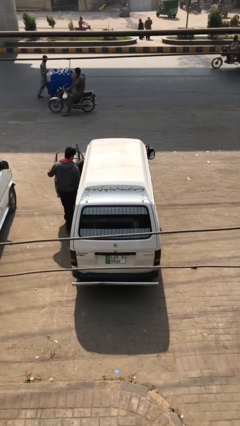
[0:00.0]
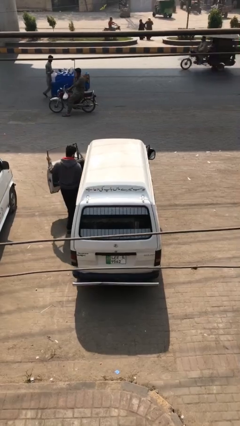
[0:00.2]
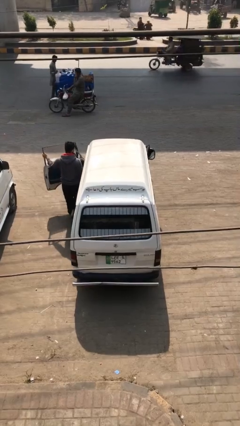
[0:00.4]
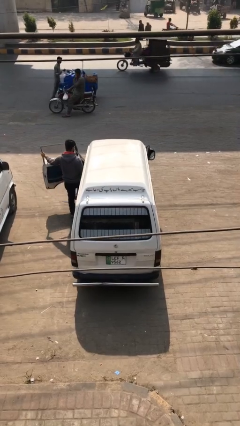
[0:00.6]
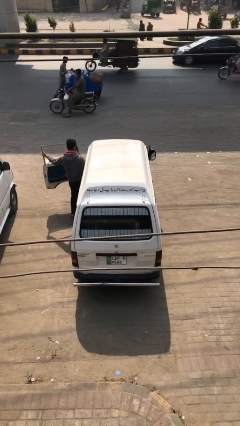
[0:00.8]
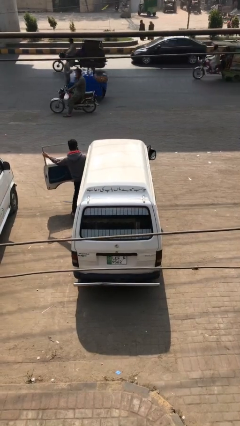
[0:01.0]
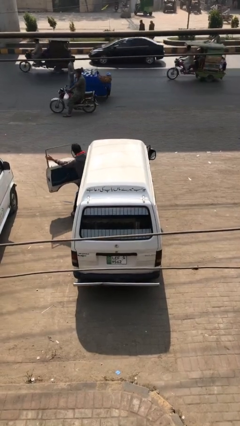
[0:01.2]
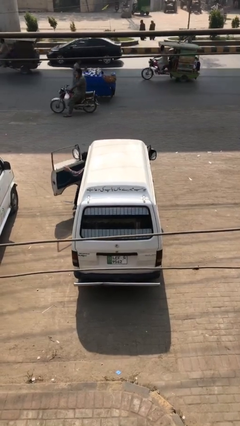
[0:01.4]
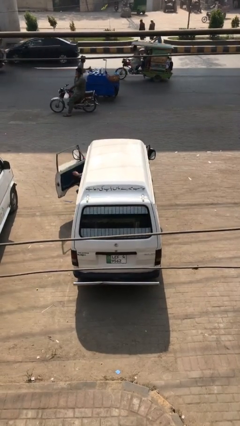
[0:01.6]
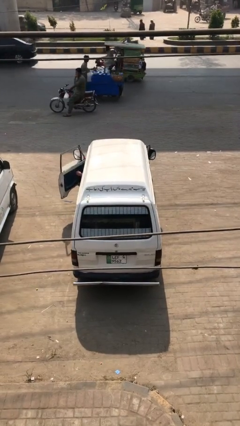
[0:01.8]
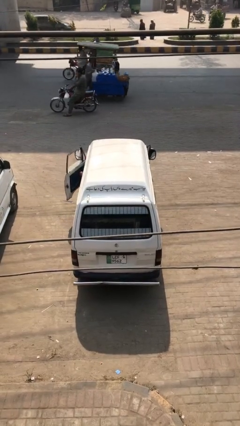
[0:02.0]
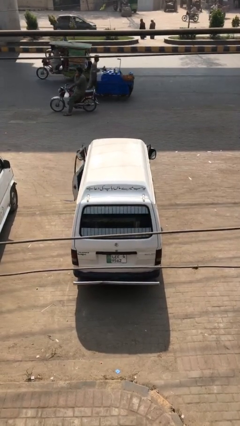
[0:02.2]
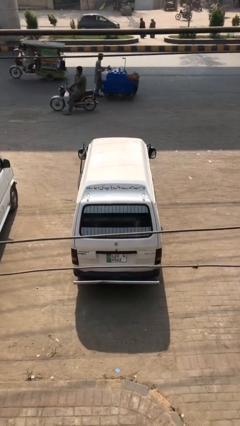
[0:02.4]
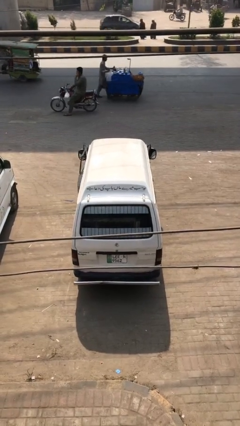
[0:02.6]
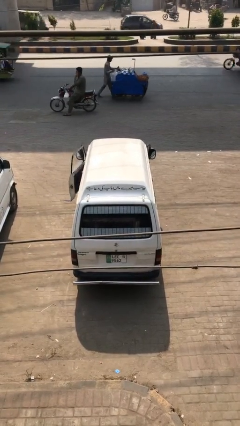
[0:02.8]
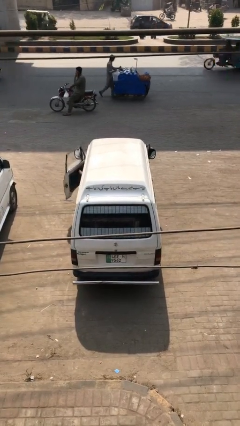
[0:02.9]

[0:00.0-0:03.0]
car picks up person

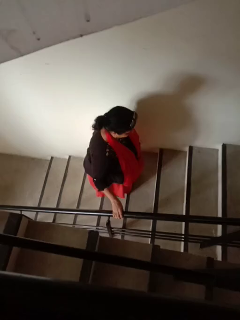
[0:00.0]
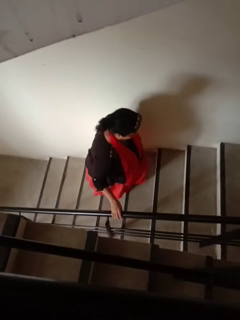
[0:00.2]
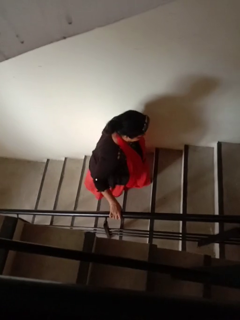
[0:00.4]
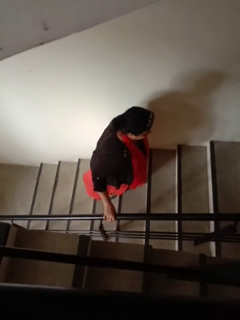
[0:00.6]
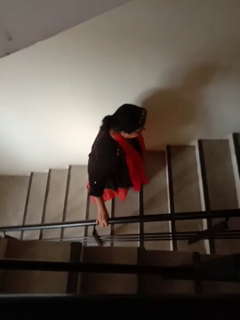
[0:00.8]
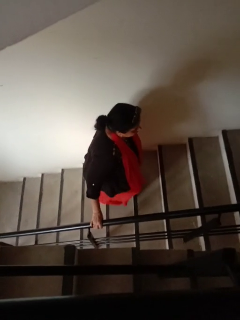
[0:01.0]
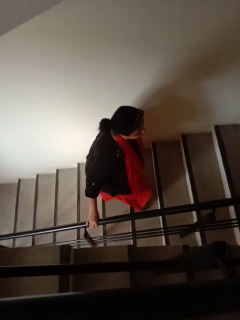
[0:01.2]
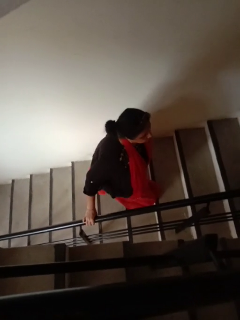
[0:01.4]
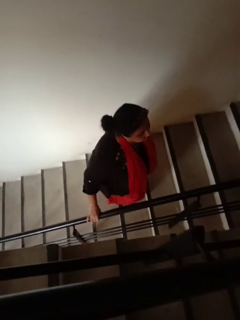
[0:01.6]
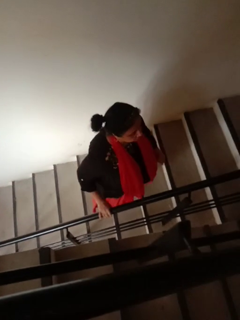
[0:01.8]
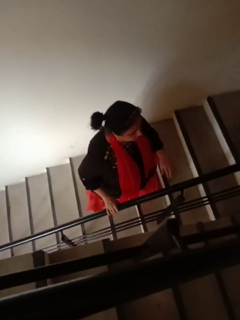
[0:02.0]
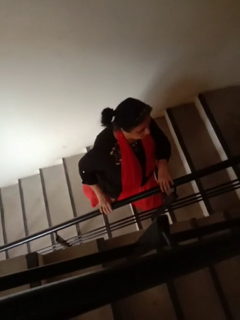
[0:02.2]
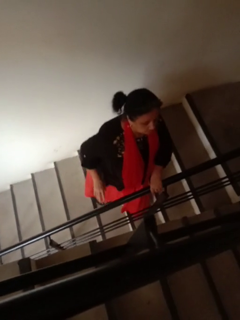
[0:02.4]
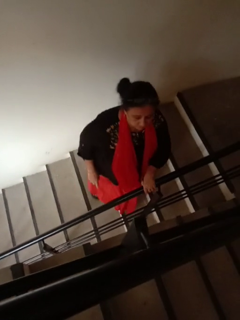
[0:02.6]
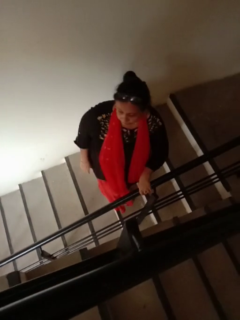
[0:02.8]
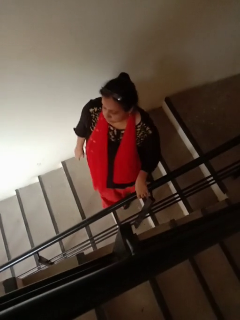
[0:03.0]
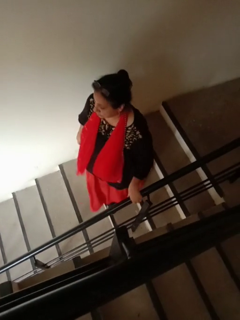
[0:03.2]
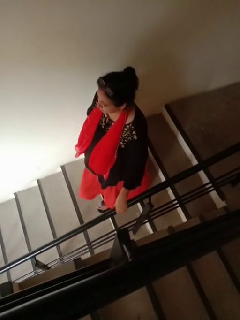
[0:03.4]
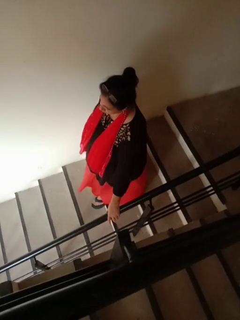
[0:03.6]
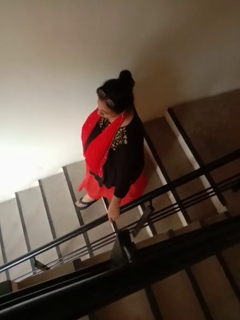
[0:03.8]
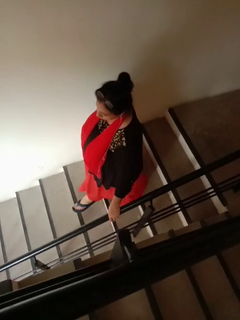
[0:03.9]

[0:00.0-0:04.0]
person climbs up stairs

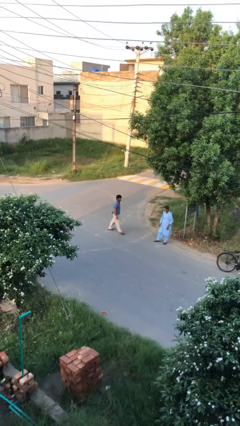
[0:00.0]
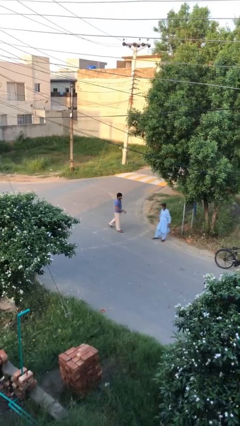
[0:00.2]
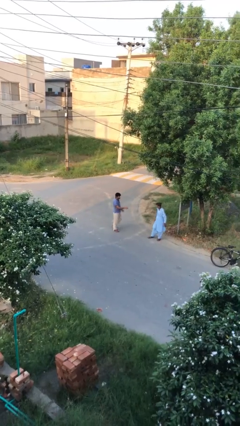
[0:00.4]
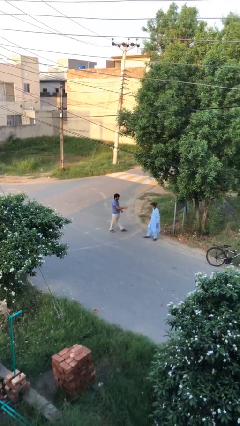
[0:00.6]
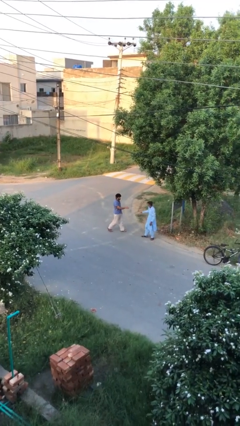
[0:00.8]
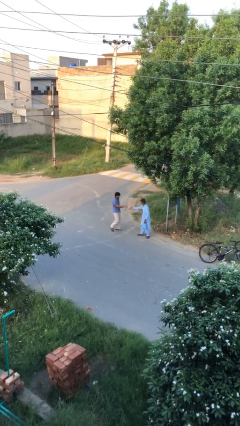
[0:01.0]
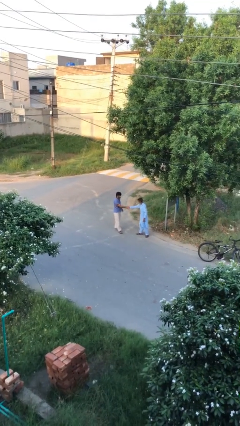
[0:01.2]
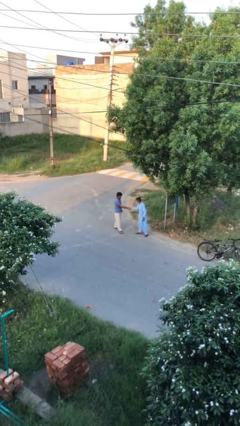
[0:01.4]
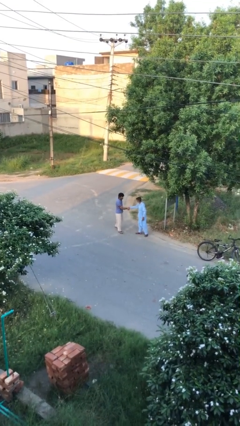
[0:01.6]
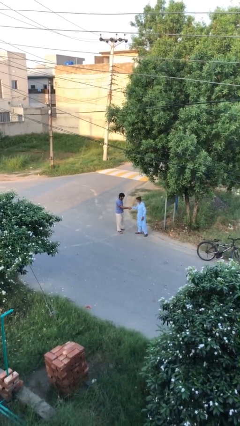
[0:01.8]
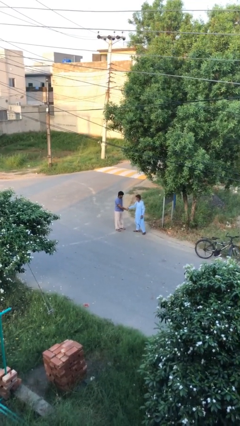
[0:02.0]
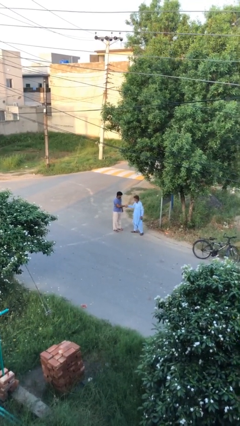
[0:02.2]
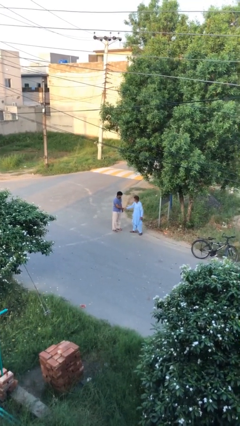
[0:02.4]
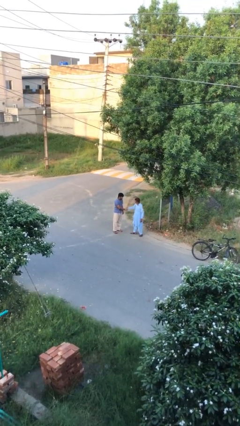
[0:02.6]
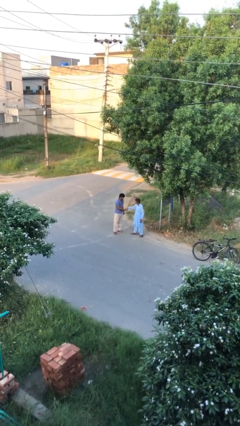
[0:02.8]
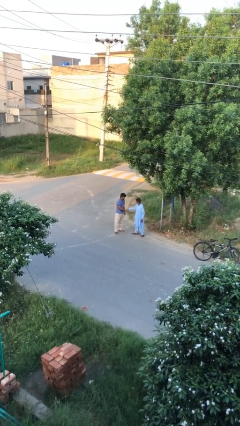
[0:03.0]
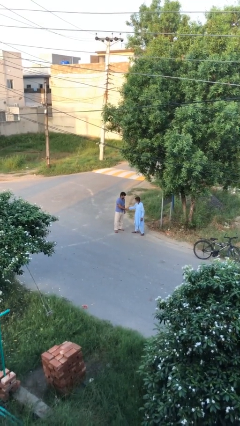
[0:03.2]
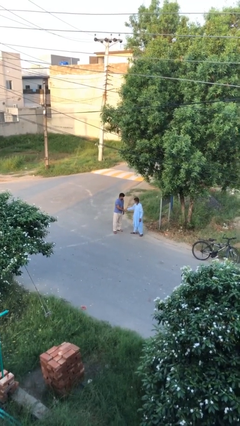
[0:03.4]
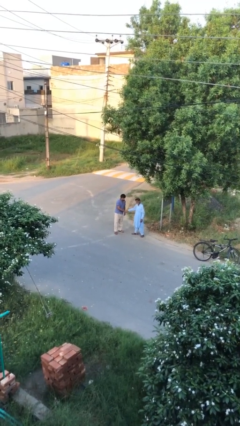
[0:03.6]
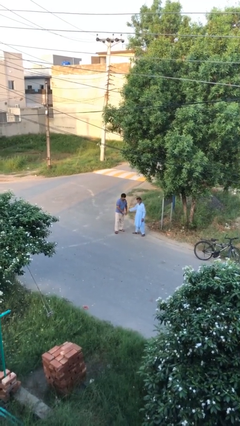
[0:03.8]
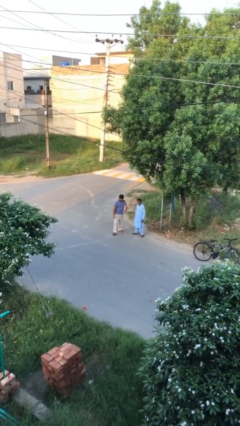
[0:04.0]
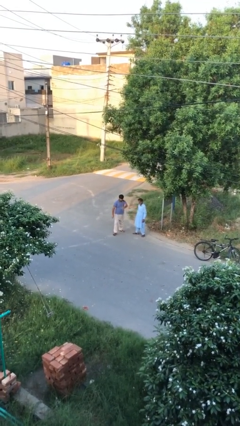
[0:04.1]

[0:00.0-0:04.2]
person shakes hand

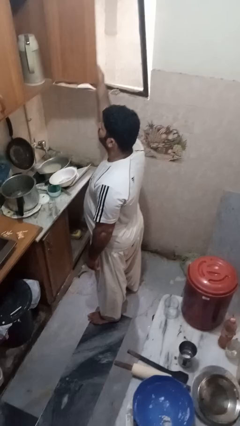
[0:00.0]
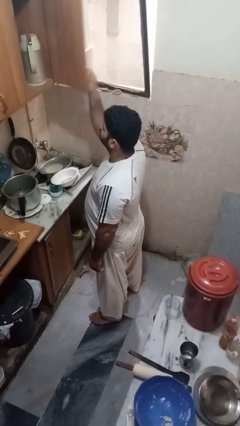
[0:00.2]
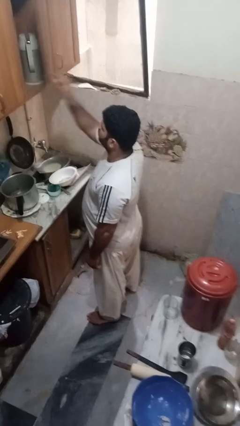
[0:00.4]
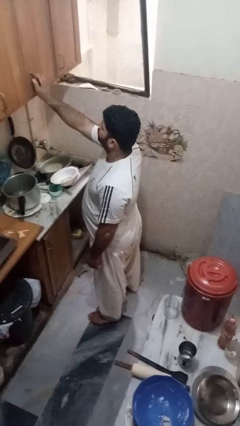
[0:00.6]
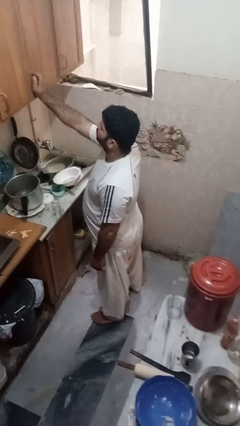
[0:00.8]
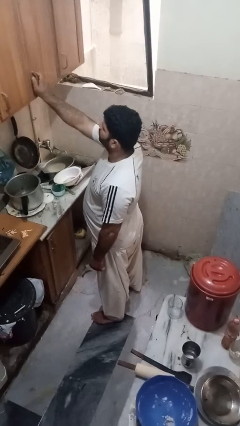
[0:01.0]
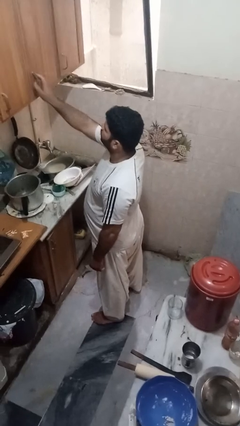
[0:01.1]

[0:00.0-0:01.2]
person closes cabinet

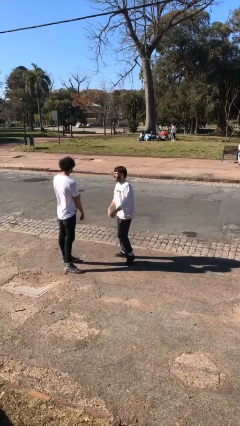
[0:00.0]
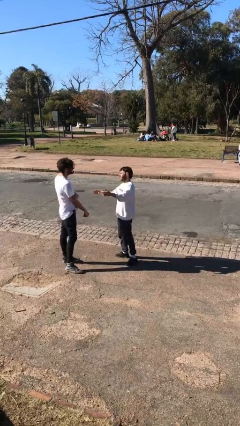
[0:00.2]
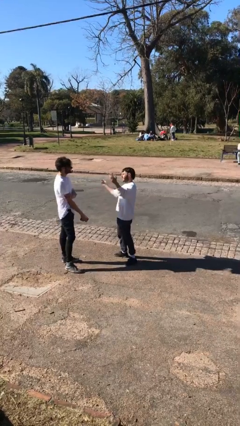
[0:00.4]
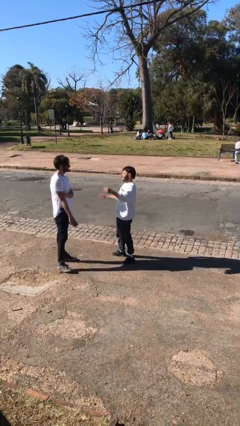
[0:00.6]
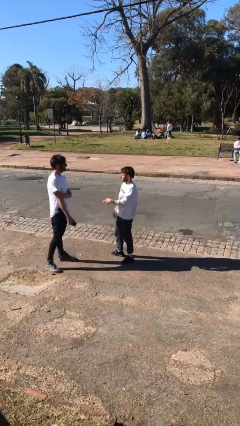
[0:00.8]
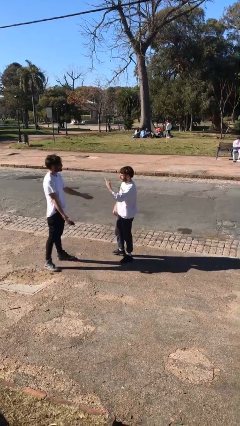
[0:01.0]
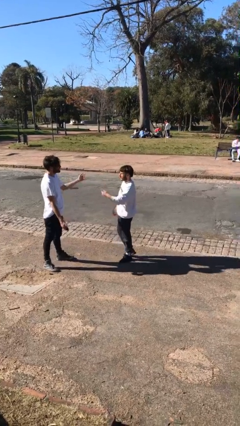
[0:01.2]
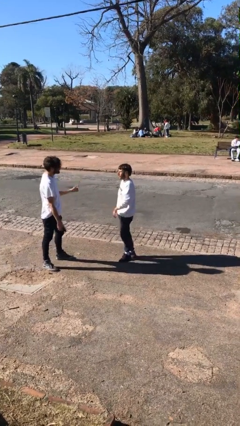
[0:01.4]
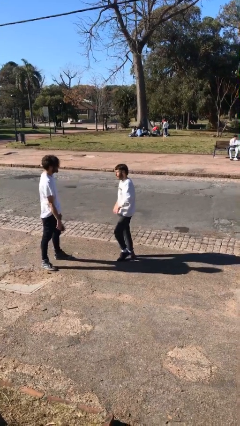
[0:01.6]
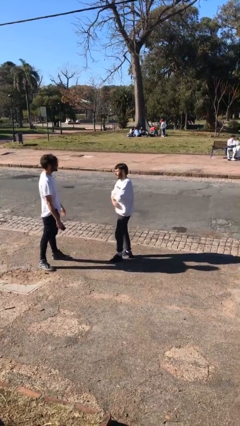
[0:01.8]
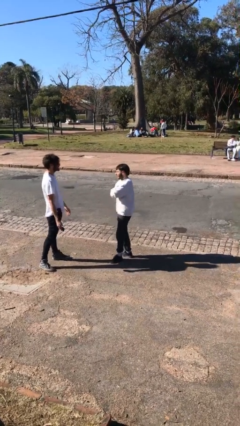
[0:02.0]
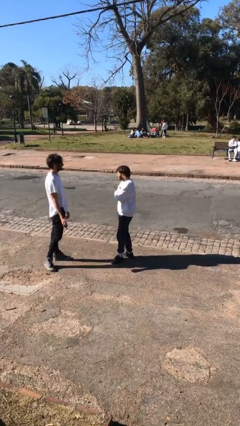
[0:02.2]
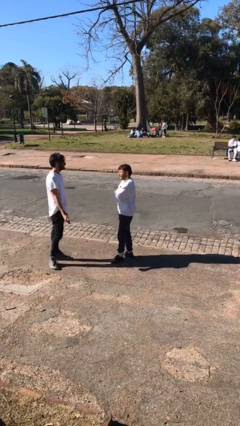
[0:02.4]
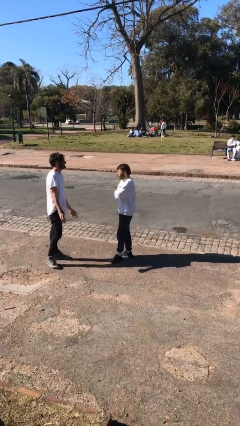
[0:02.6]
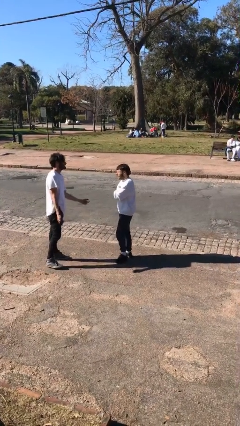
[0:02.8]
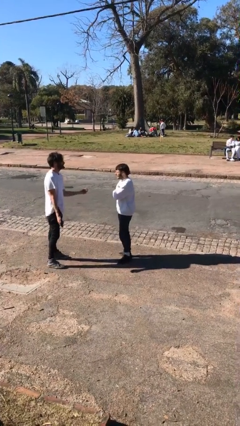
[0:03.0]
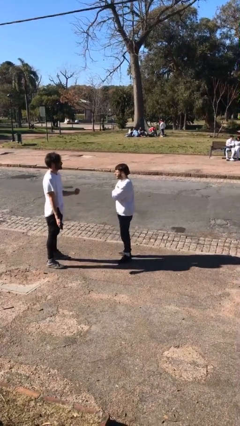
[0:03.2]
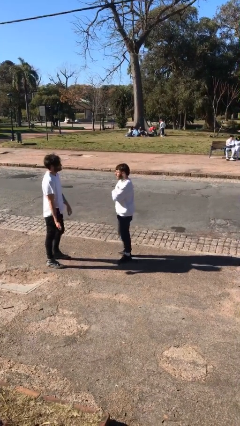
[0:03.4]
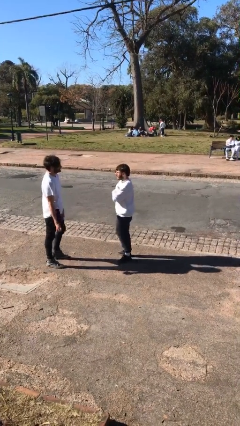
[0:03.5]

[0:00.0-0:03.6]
person talks to person

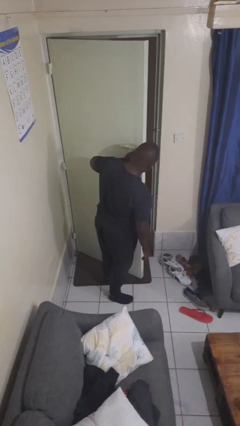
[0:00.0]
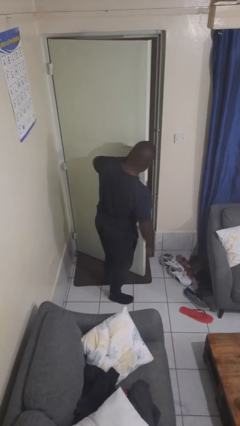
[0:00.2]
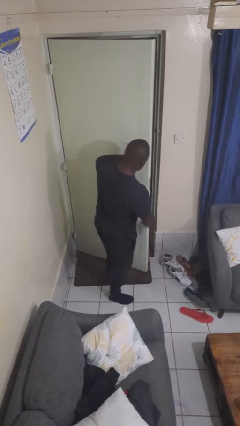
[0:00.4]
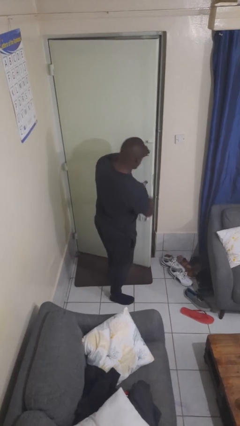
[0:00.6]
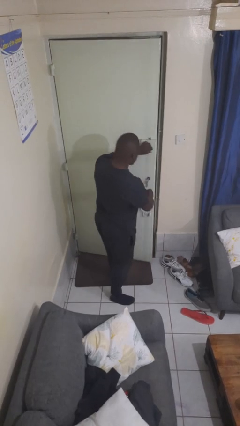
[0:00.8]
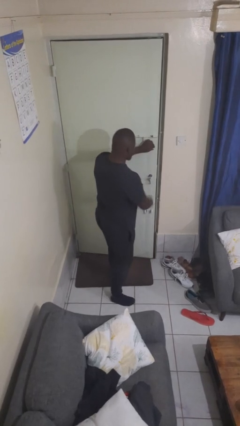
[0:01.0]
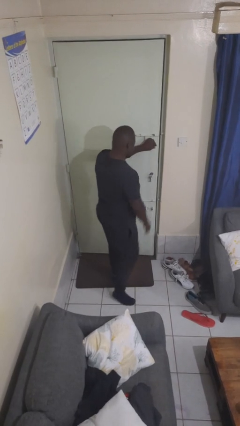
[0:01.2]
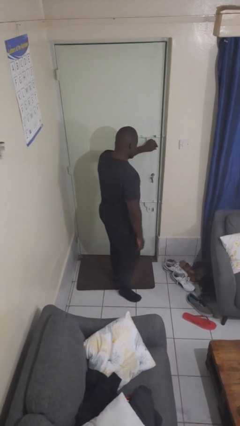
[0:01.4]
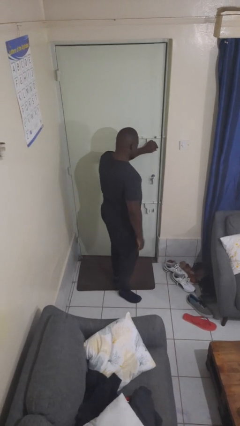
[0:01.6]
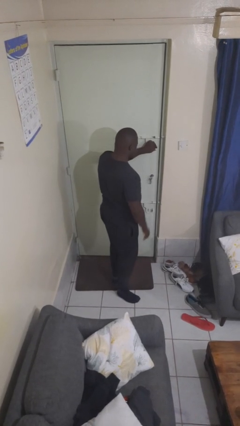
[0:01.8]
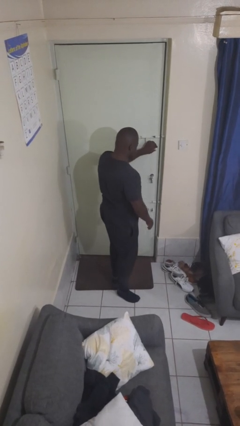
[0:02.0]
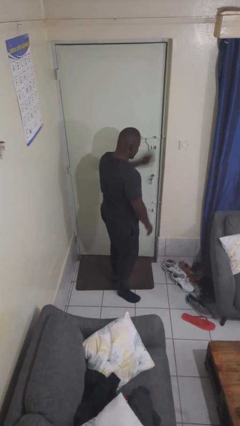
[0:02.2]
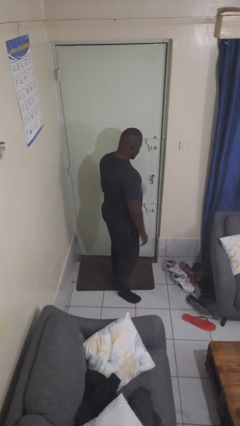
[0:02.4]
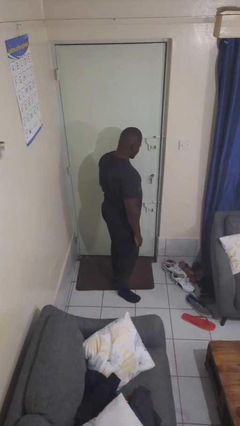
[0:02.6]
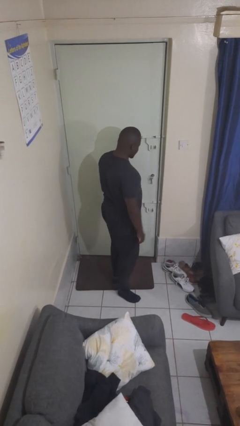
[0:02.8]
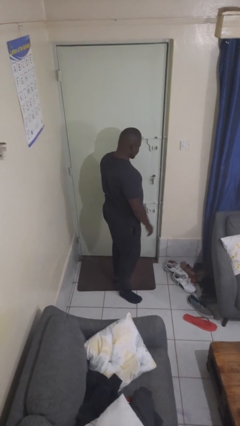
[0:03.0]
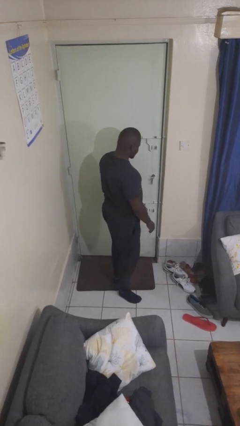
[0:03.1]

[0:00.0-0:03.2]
person closes facility door
